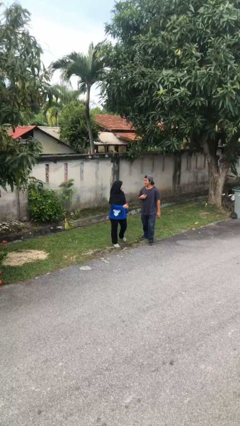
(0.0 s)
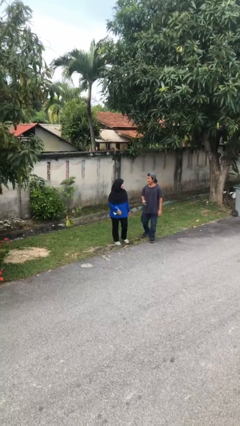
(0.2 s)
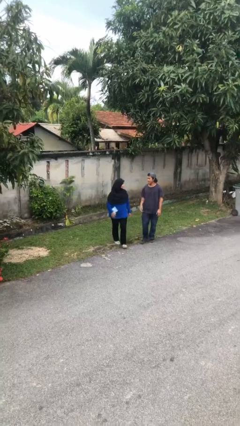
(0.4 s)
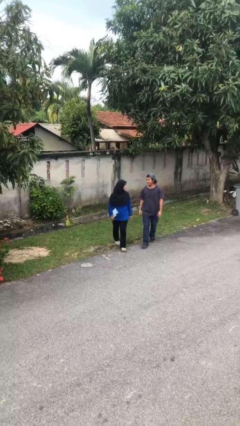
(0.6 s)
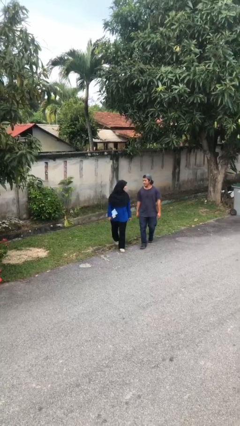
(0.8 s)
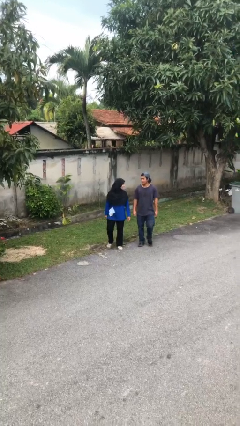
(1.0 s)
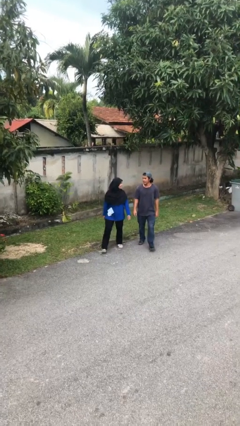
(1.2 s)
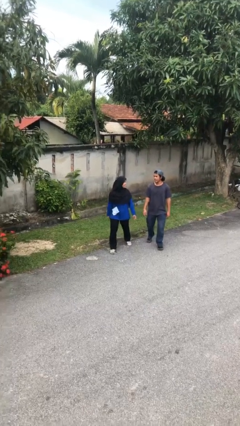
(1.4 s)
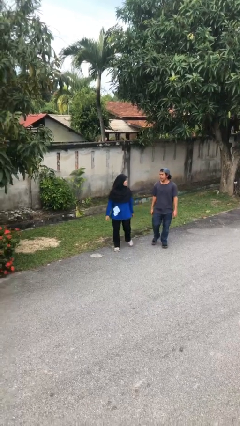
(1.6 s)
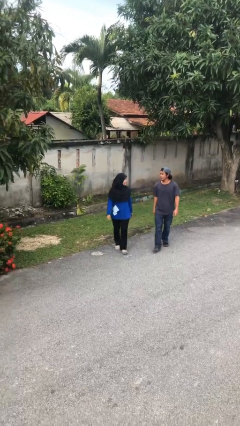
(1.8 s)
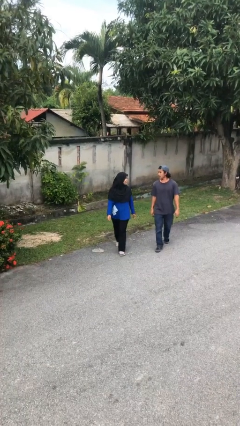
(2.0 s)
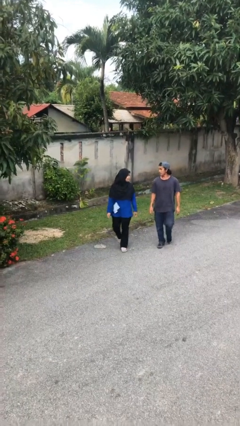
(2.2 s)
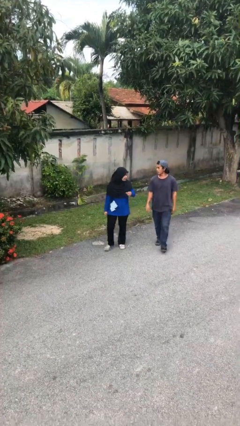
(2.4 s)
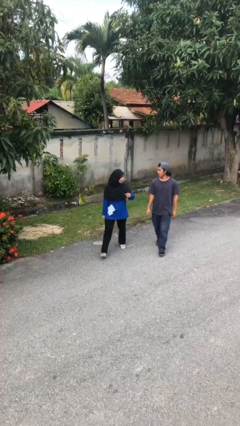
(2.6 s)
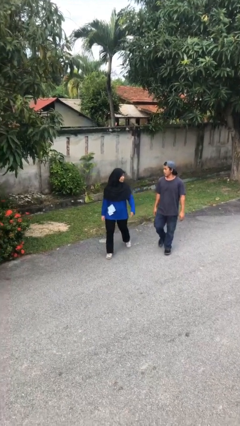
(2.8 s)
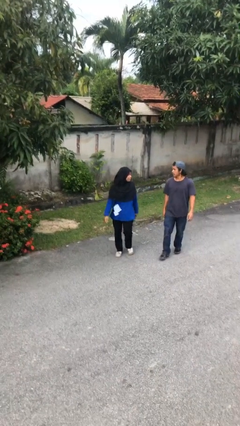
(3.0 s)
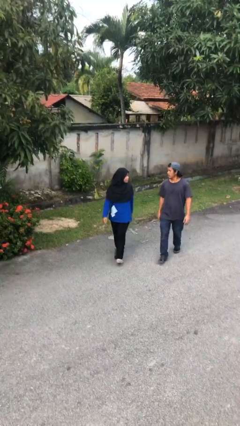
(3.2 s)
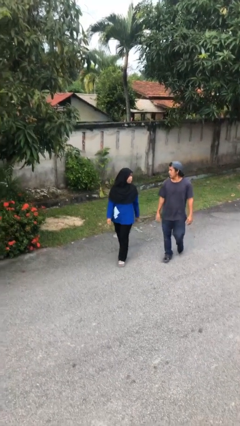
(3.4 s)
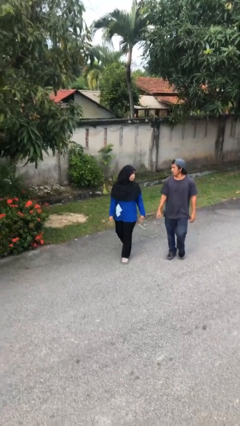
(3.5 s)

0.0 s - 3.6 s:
person talks to person

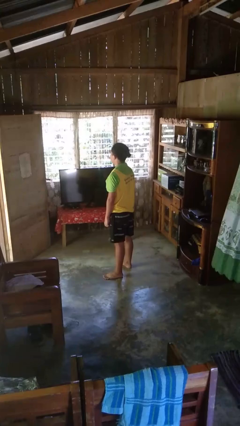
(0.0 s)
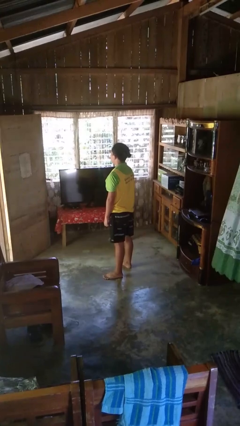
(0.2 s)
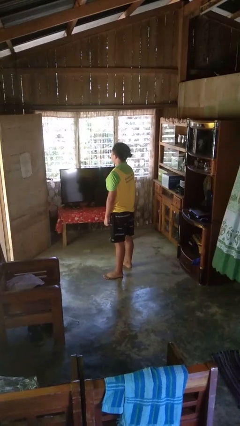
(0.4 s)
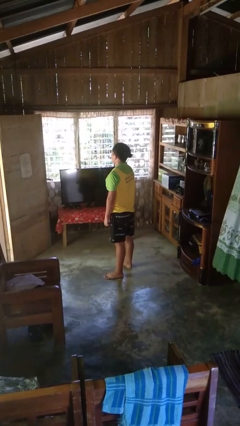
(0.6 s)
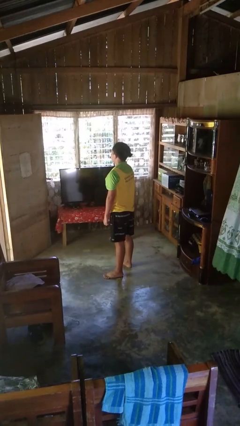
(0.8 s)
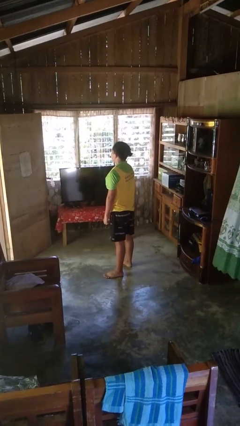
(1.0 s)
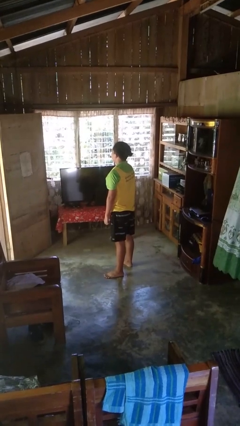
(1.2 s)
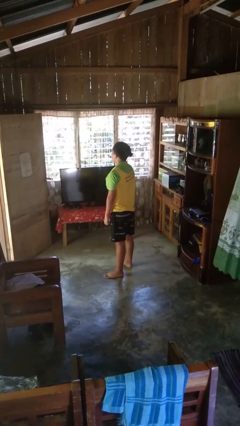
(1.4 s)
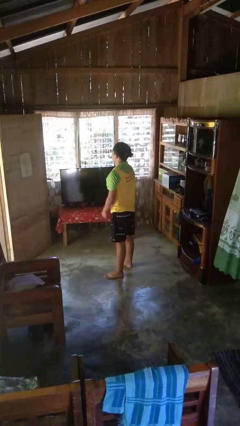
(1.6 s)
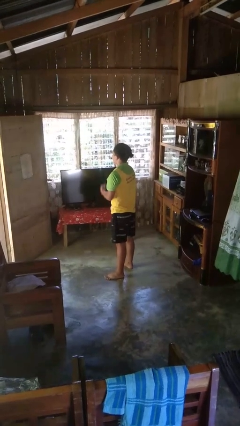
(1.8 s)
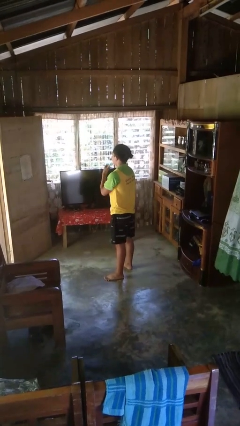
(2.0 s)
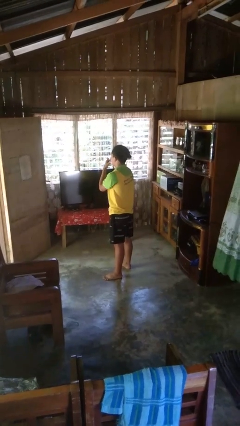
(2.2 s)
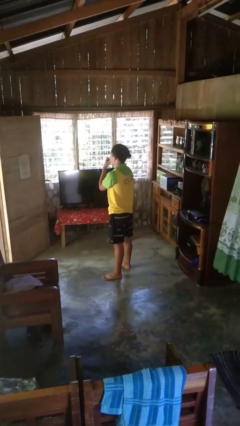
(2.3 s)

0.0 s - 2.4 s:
person licks fingers

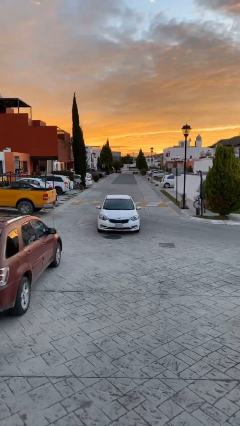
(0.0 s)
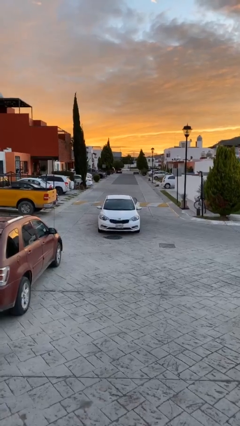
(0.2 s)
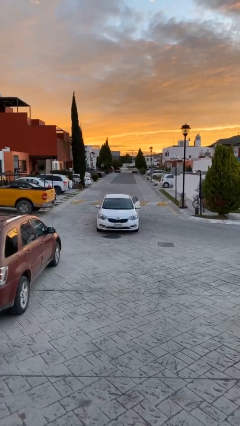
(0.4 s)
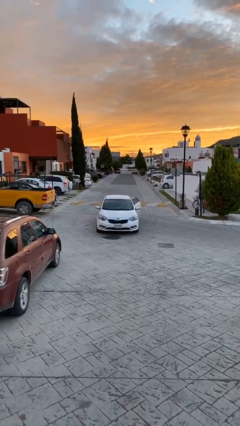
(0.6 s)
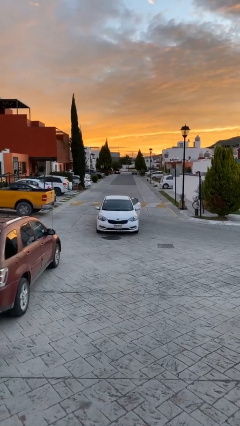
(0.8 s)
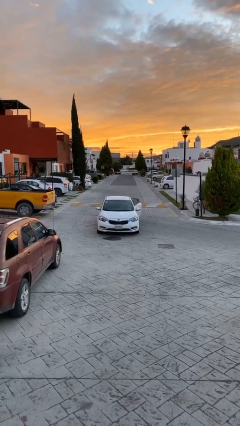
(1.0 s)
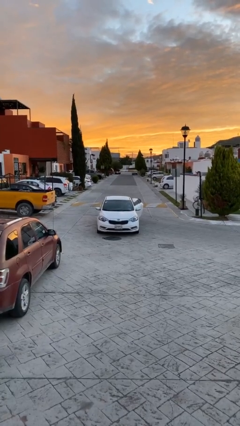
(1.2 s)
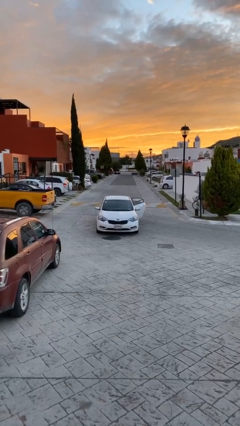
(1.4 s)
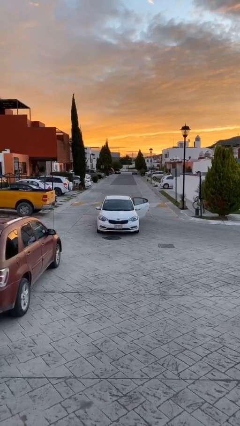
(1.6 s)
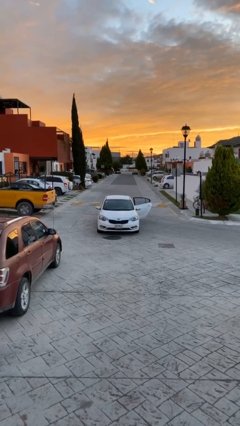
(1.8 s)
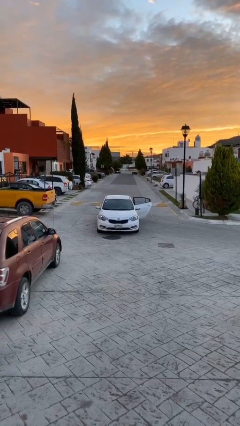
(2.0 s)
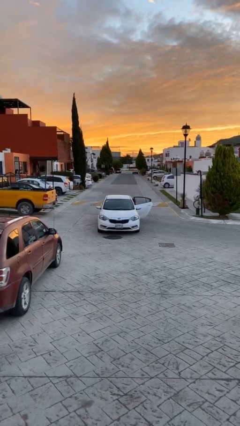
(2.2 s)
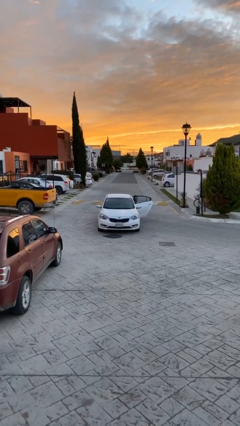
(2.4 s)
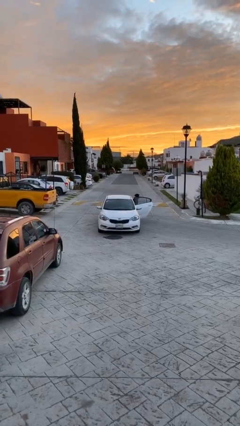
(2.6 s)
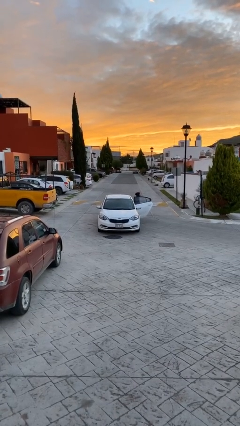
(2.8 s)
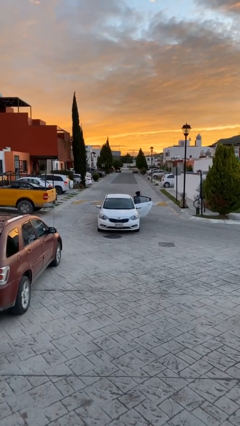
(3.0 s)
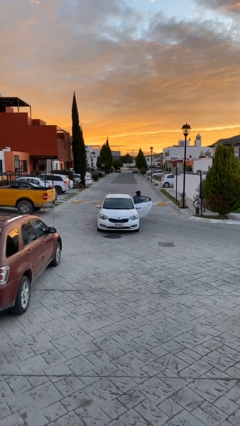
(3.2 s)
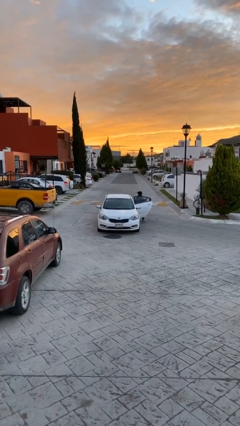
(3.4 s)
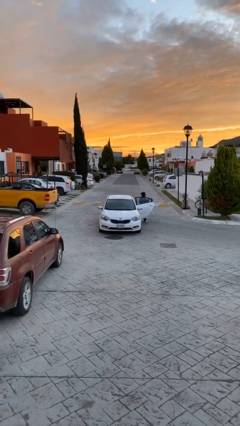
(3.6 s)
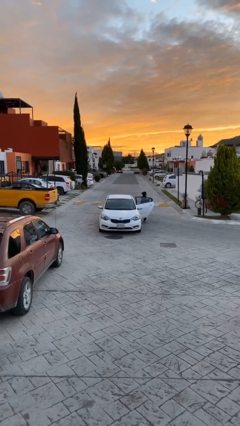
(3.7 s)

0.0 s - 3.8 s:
car drops off person

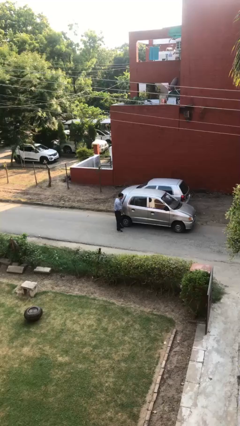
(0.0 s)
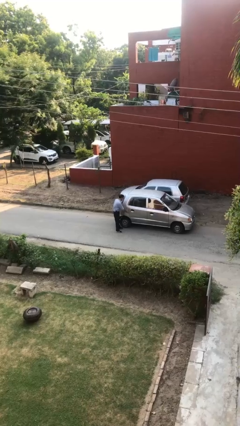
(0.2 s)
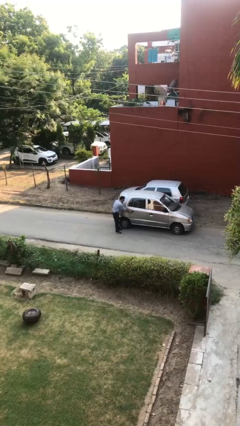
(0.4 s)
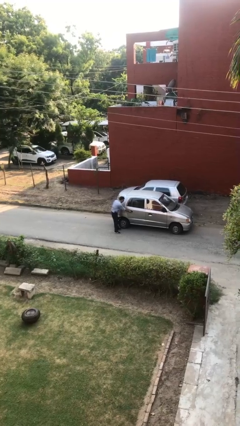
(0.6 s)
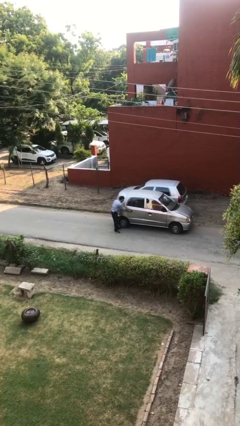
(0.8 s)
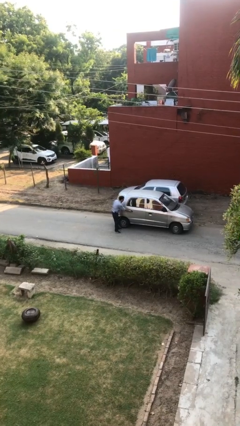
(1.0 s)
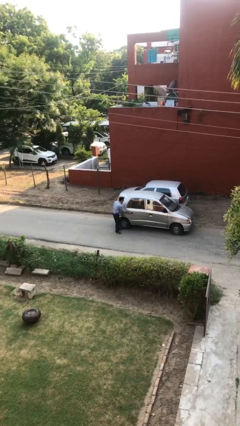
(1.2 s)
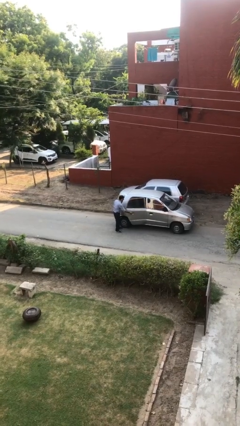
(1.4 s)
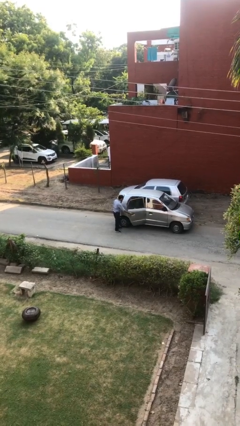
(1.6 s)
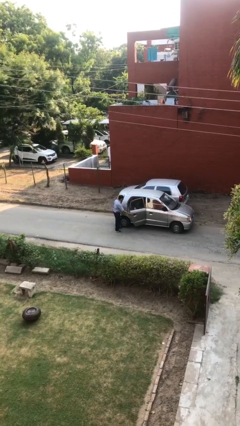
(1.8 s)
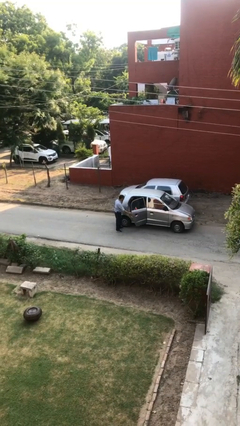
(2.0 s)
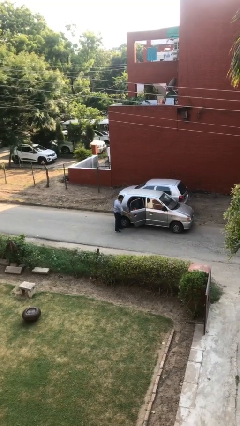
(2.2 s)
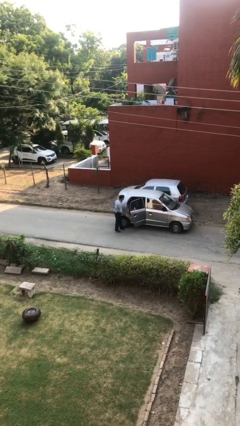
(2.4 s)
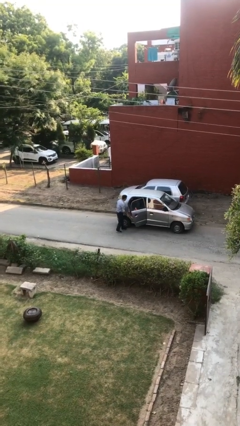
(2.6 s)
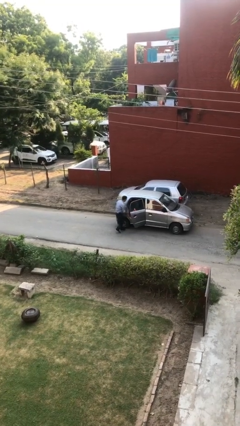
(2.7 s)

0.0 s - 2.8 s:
person opens car door

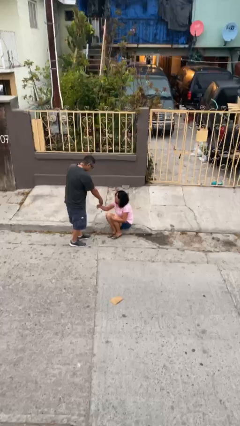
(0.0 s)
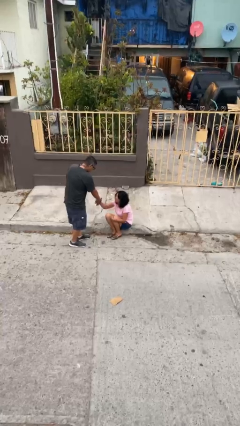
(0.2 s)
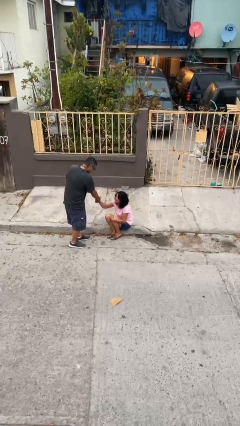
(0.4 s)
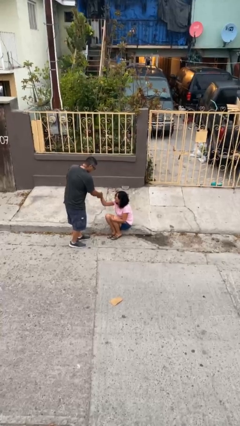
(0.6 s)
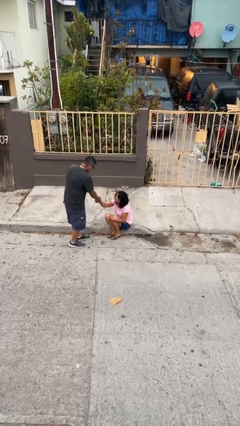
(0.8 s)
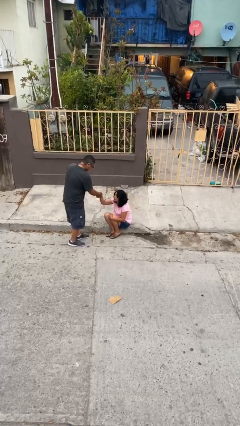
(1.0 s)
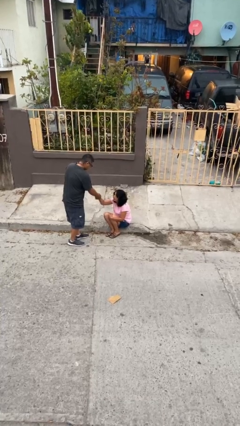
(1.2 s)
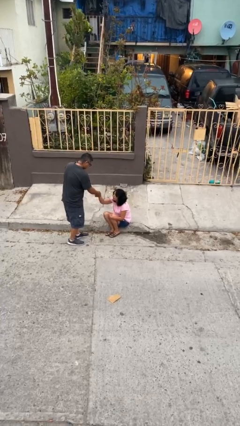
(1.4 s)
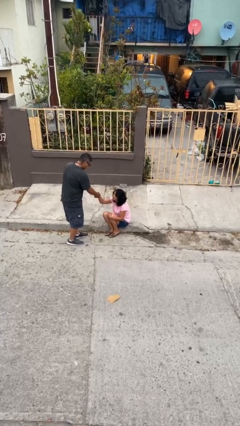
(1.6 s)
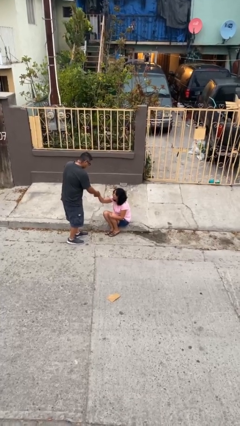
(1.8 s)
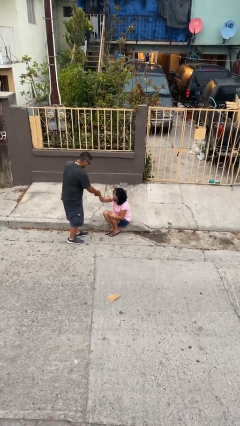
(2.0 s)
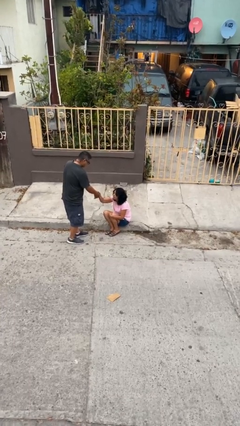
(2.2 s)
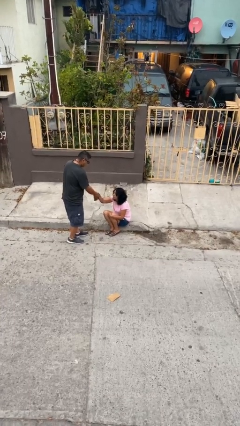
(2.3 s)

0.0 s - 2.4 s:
person shakes hand

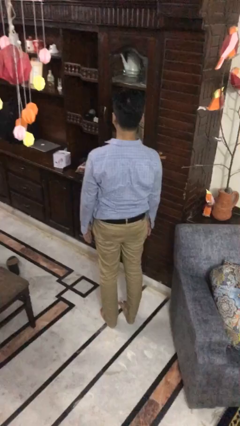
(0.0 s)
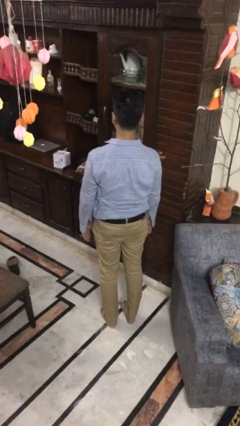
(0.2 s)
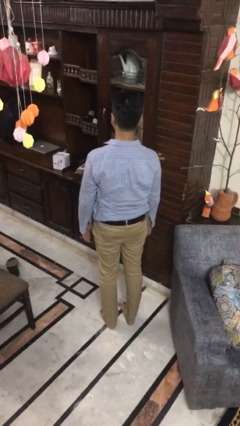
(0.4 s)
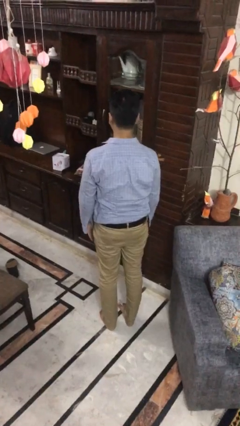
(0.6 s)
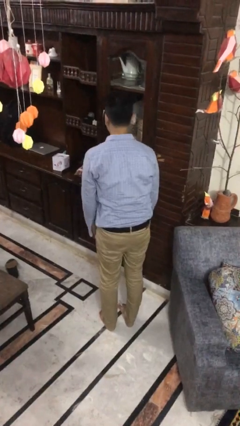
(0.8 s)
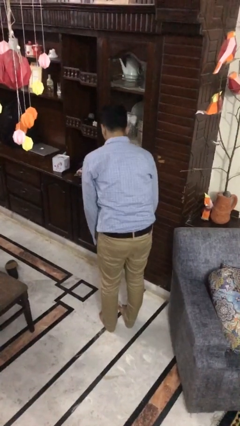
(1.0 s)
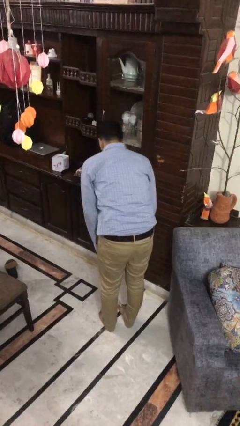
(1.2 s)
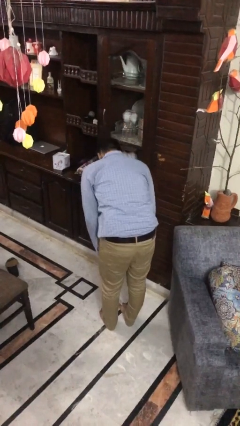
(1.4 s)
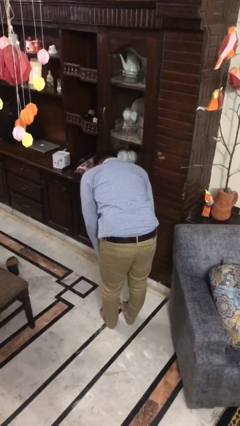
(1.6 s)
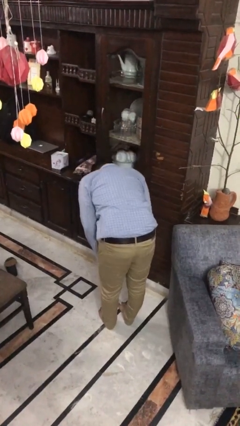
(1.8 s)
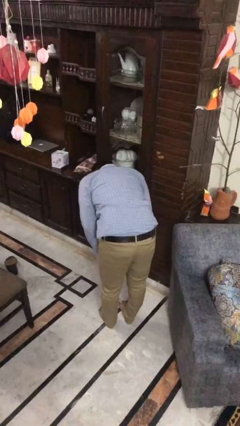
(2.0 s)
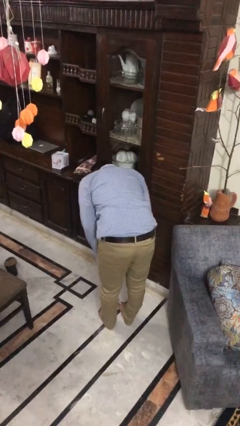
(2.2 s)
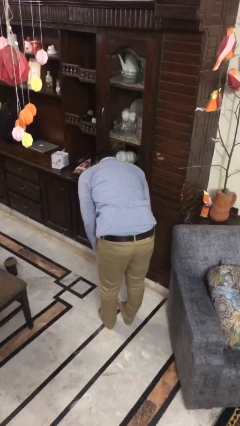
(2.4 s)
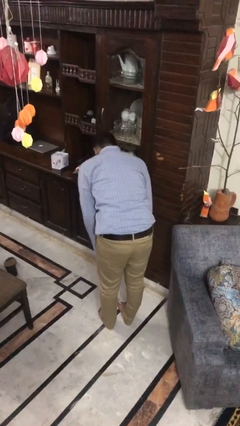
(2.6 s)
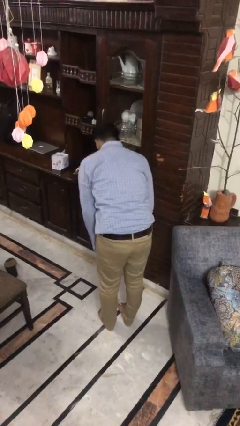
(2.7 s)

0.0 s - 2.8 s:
person bows

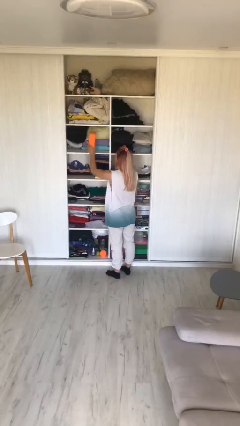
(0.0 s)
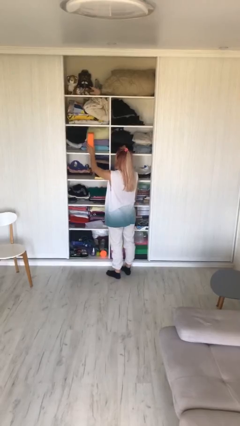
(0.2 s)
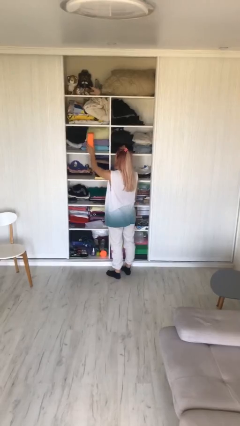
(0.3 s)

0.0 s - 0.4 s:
person puts down object on shelf
